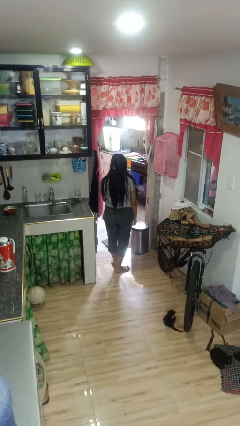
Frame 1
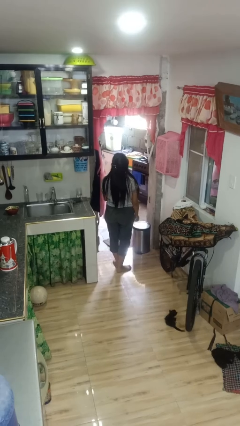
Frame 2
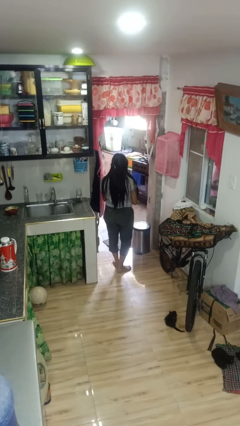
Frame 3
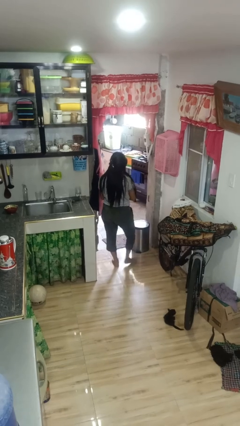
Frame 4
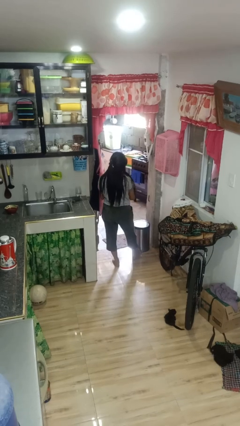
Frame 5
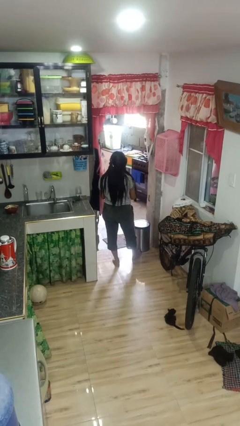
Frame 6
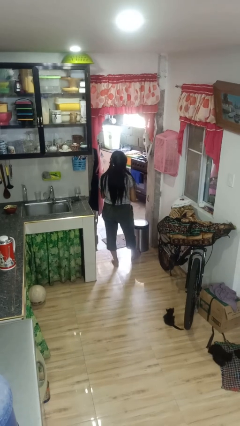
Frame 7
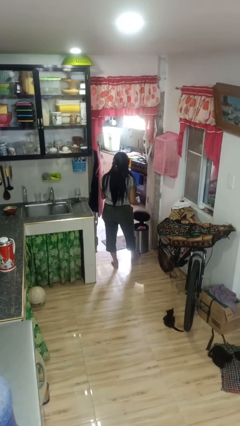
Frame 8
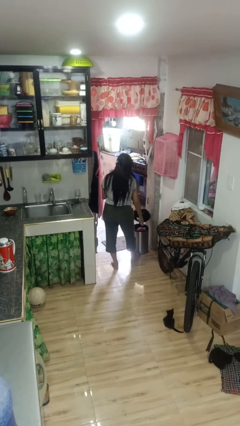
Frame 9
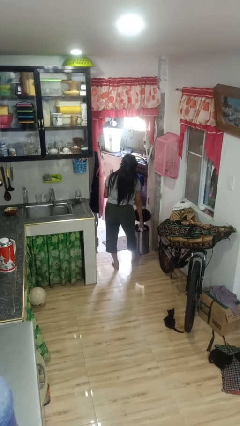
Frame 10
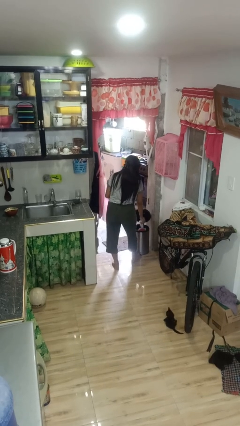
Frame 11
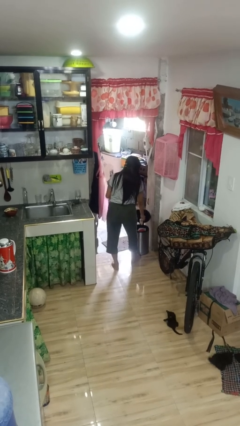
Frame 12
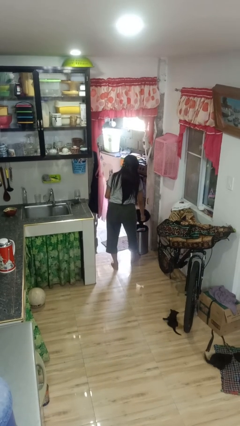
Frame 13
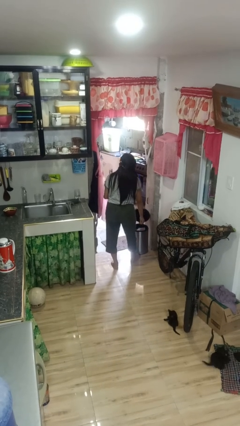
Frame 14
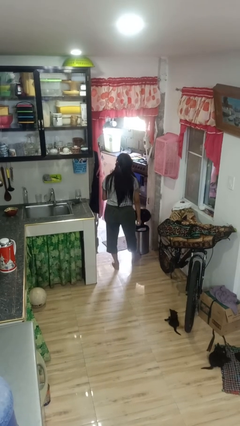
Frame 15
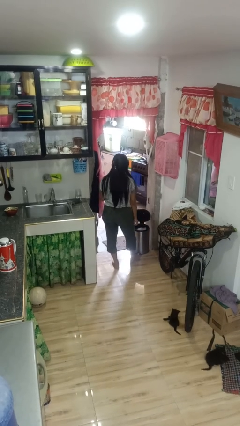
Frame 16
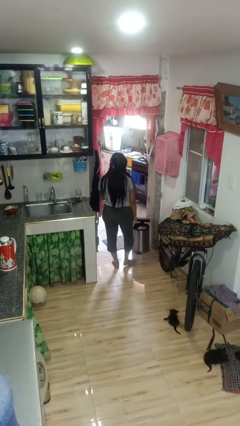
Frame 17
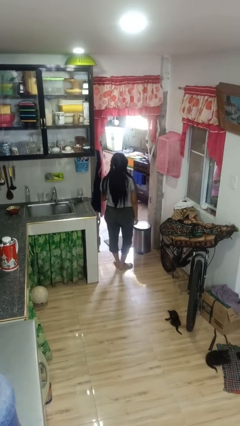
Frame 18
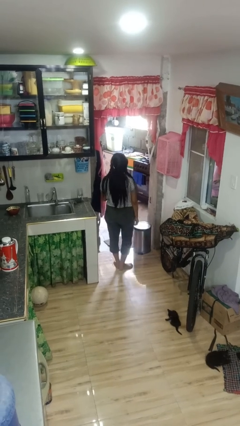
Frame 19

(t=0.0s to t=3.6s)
person discards trash

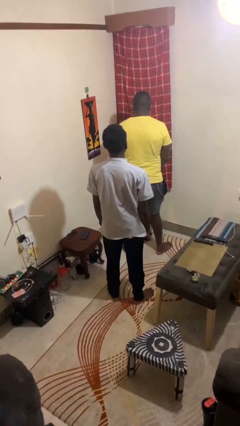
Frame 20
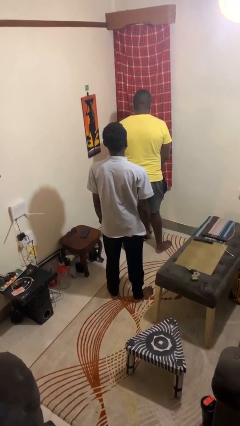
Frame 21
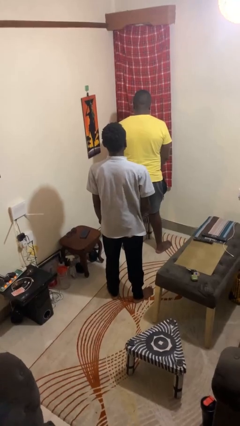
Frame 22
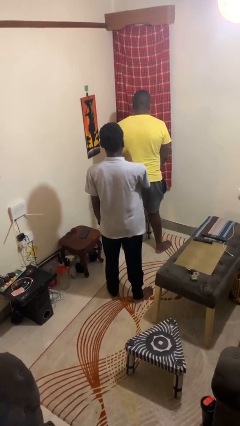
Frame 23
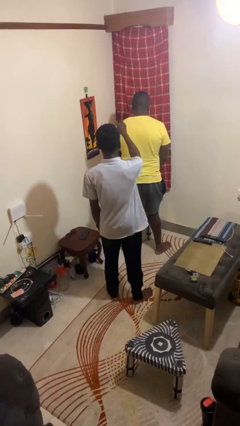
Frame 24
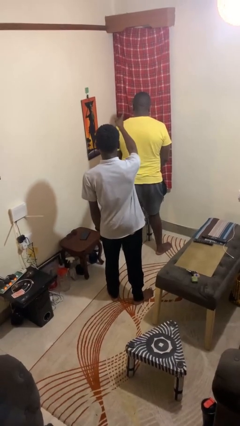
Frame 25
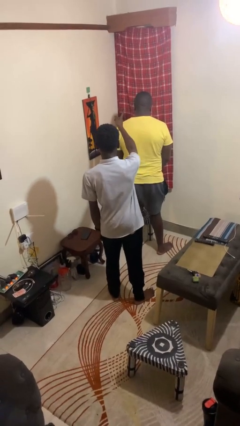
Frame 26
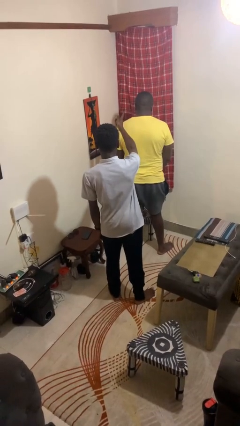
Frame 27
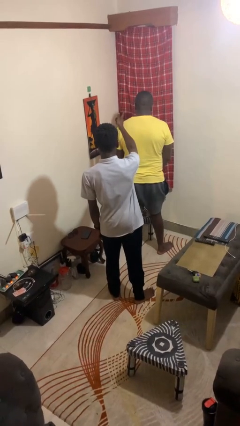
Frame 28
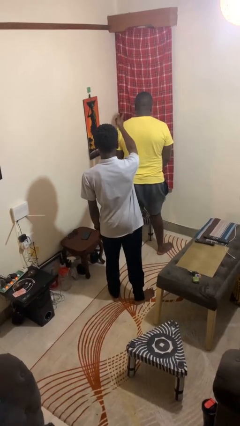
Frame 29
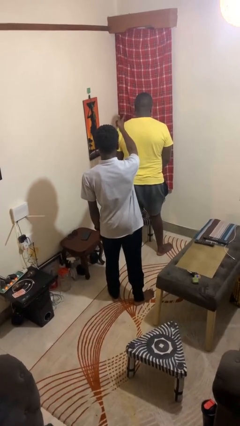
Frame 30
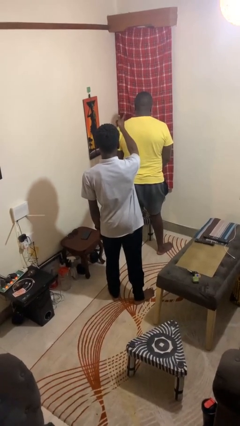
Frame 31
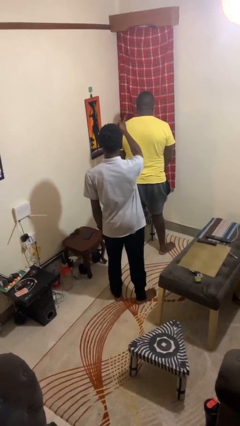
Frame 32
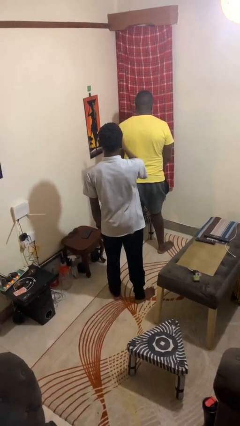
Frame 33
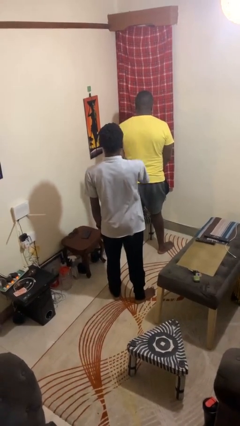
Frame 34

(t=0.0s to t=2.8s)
person points at person

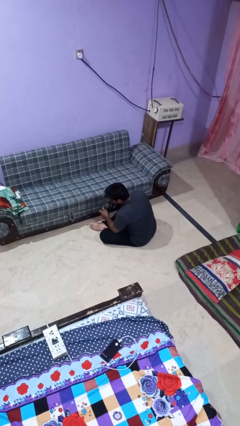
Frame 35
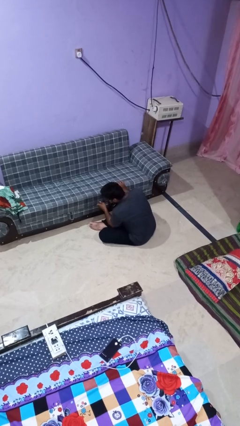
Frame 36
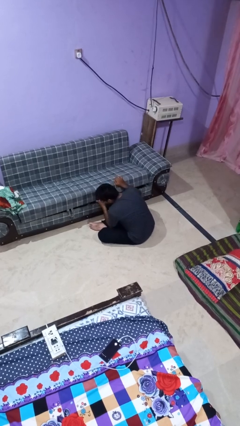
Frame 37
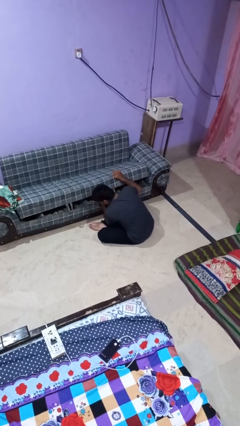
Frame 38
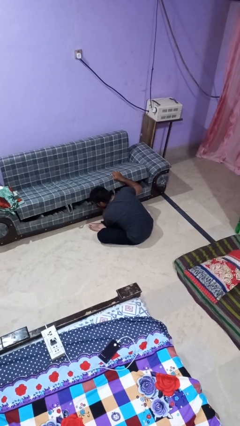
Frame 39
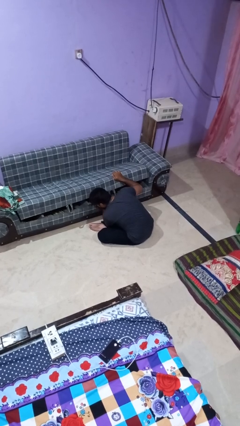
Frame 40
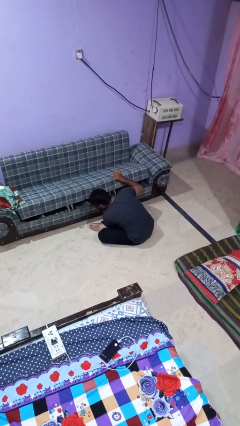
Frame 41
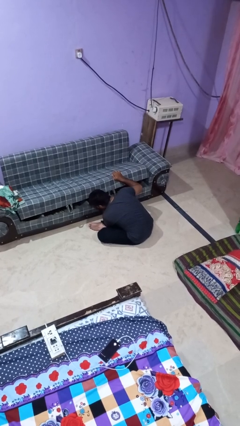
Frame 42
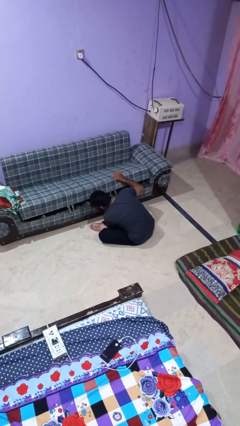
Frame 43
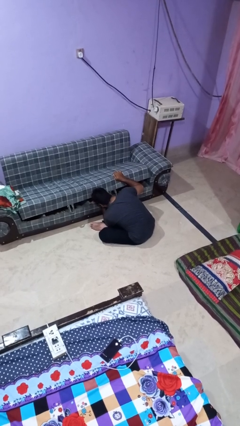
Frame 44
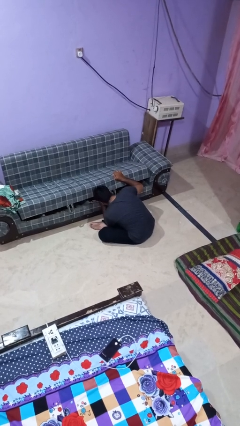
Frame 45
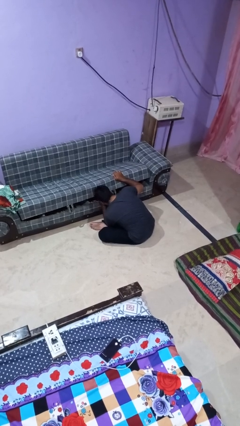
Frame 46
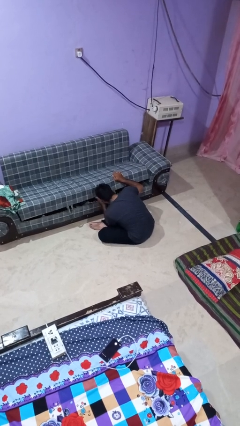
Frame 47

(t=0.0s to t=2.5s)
person searches under couch

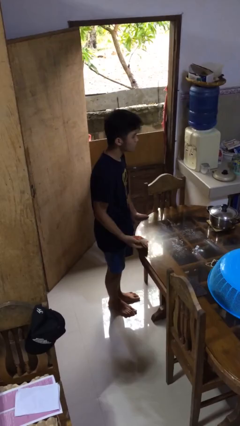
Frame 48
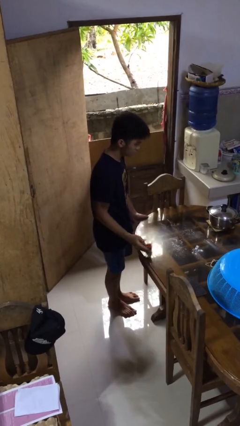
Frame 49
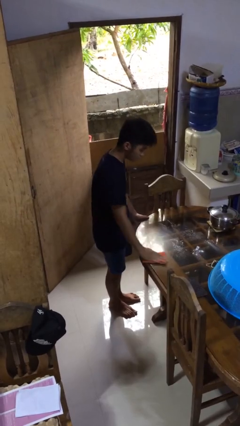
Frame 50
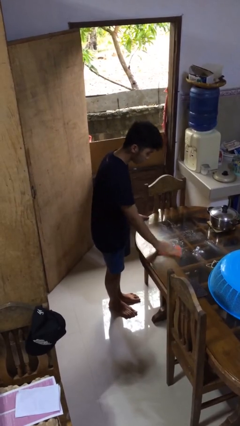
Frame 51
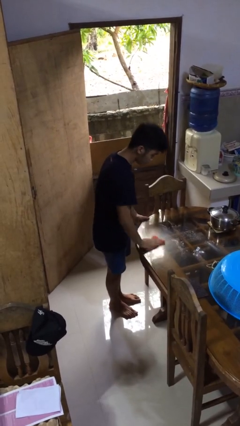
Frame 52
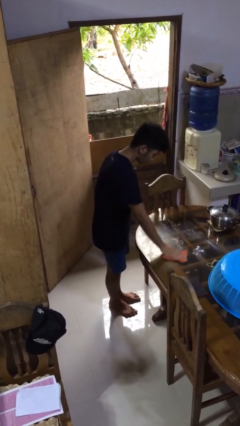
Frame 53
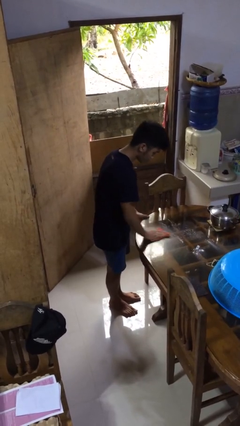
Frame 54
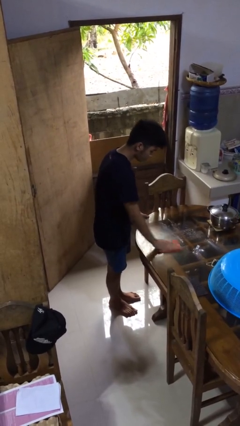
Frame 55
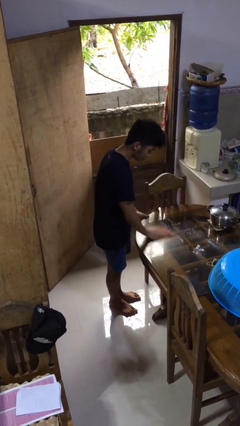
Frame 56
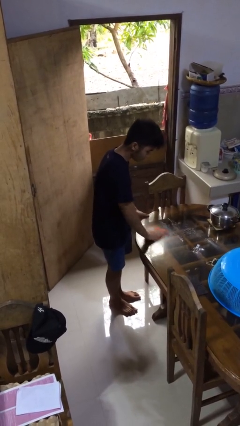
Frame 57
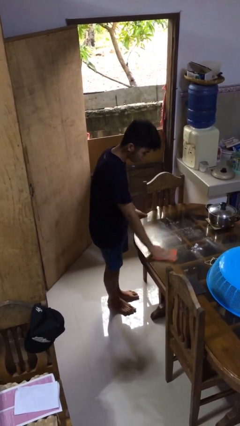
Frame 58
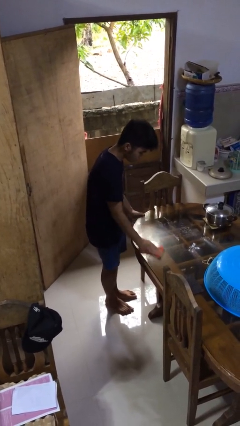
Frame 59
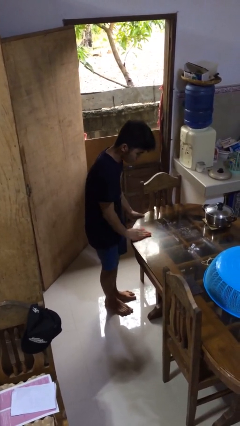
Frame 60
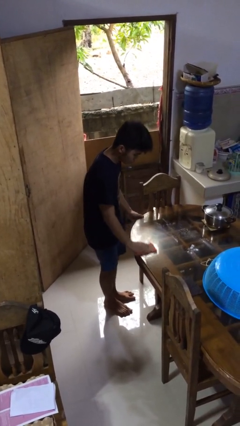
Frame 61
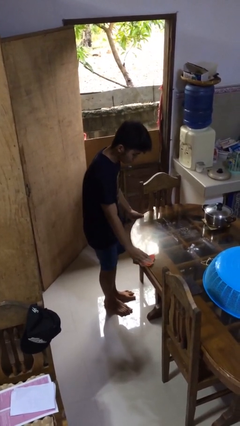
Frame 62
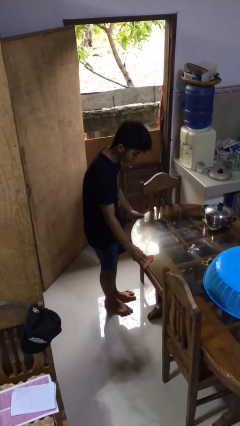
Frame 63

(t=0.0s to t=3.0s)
person cleans table with rag

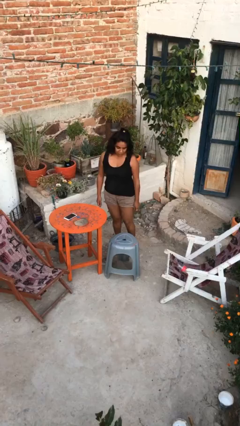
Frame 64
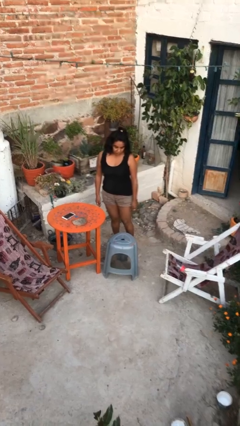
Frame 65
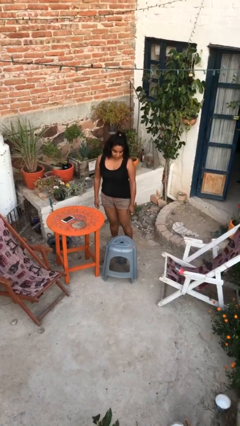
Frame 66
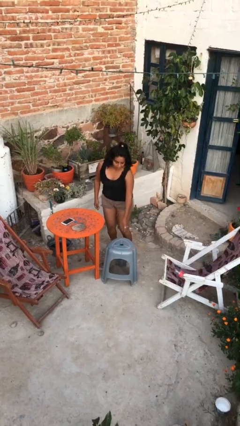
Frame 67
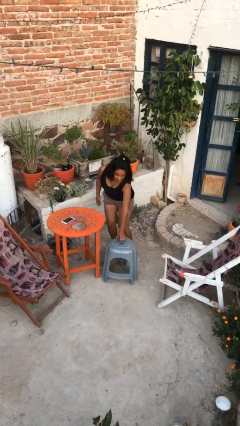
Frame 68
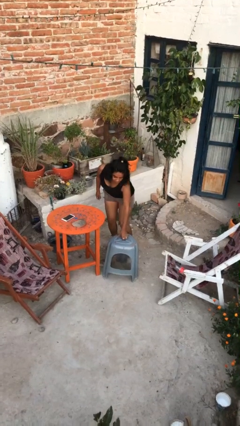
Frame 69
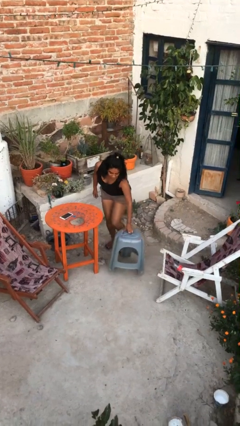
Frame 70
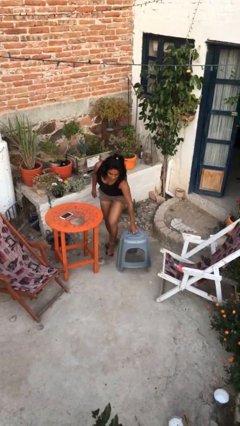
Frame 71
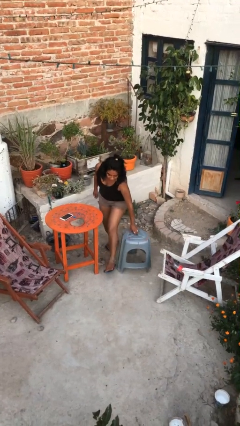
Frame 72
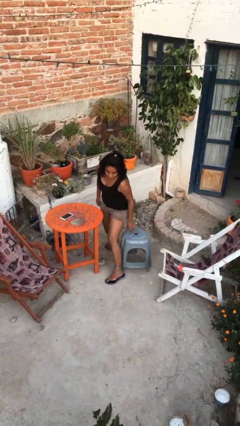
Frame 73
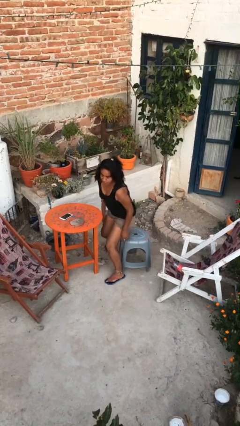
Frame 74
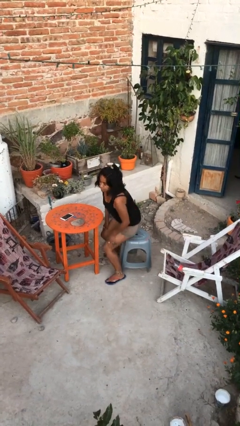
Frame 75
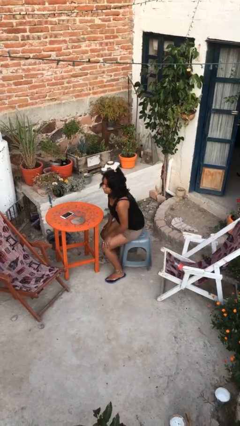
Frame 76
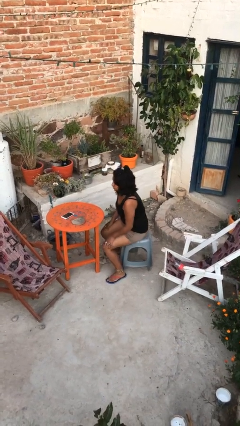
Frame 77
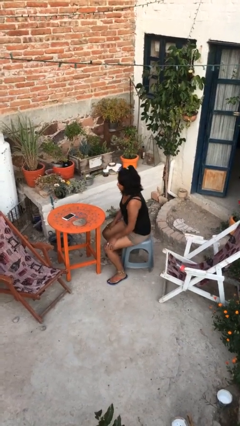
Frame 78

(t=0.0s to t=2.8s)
person sits down

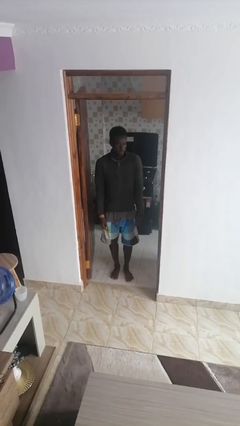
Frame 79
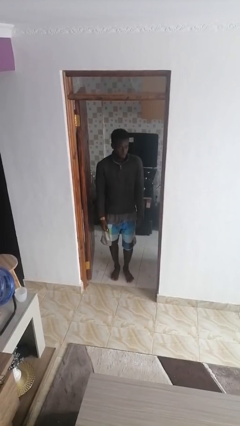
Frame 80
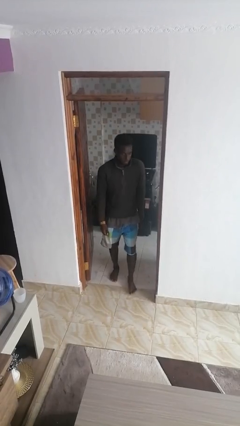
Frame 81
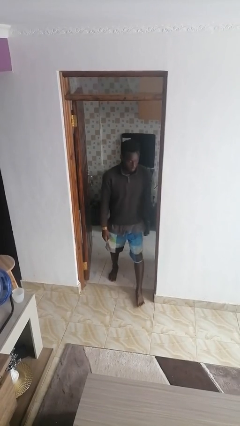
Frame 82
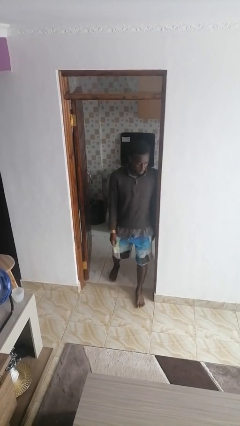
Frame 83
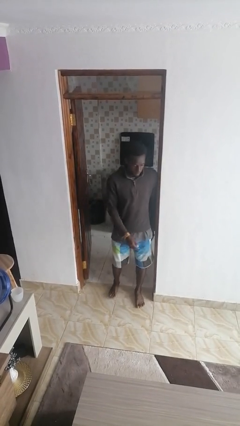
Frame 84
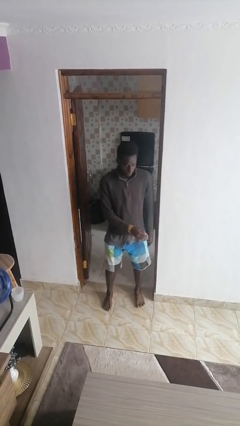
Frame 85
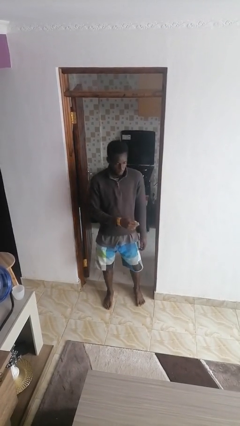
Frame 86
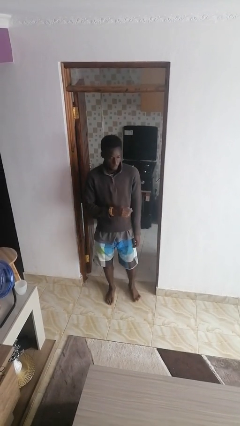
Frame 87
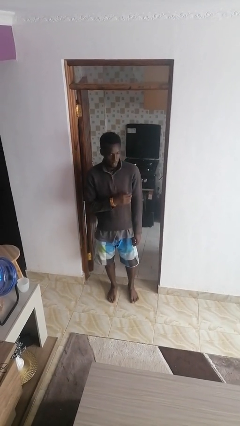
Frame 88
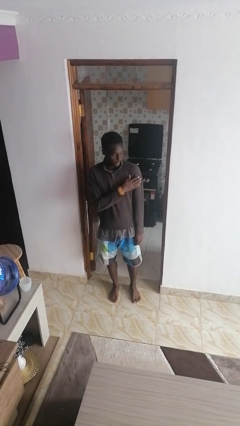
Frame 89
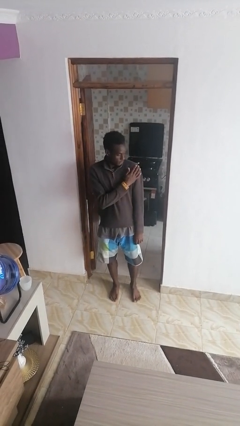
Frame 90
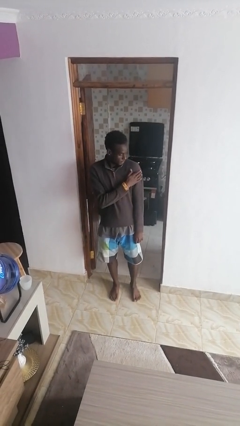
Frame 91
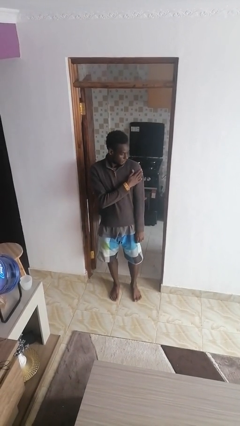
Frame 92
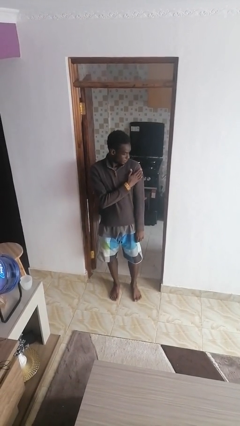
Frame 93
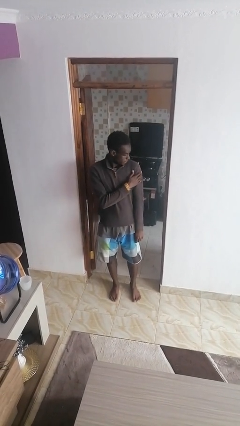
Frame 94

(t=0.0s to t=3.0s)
person bumps into wall
